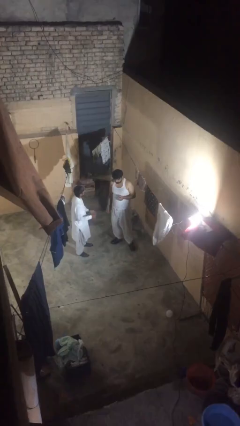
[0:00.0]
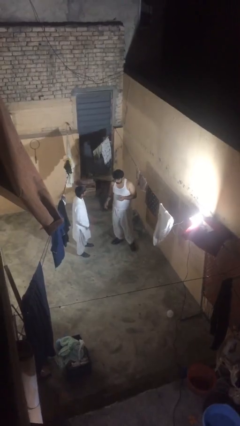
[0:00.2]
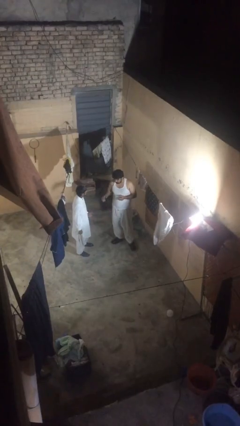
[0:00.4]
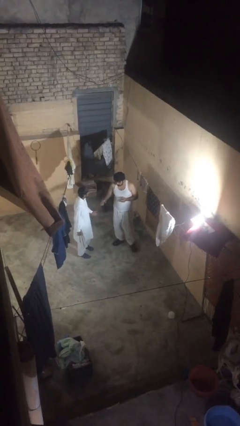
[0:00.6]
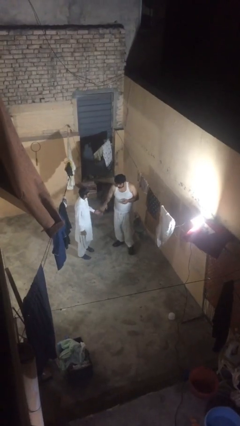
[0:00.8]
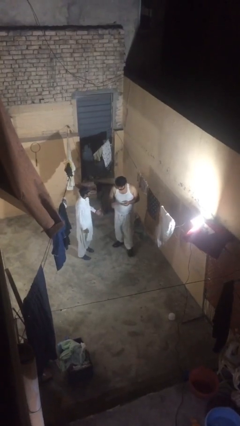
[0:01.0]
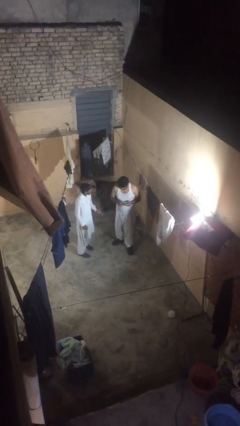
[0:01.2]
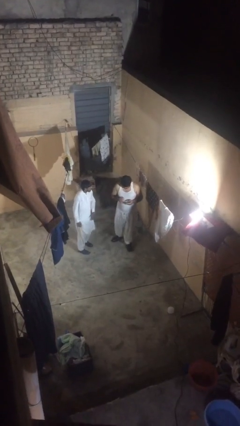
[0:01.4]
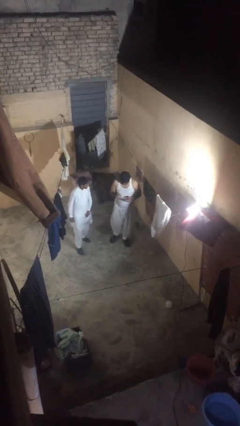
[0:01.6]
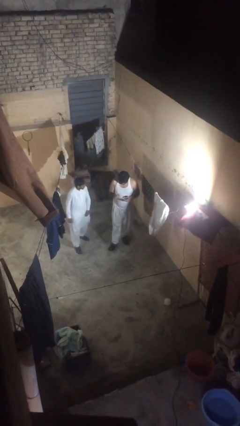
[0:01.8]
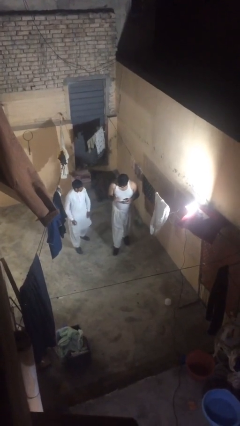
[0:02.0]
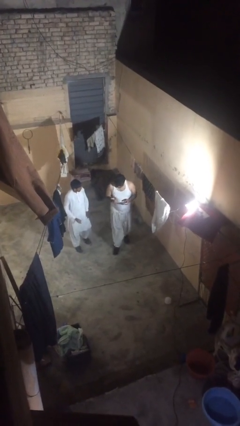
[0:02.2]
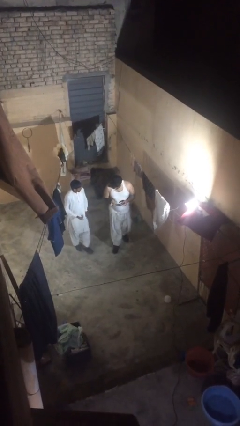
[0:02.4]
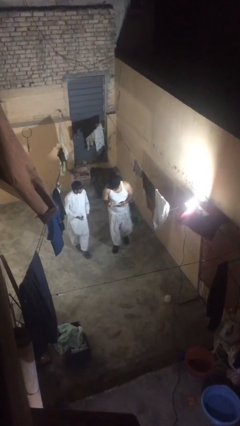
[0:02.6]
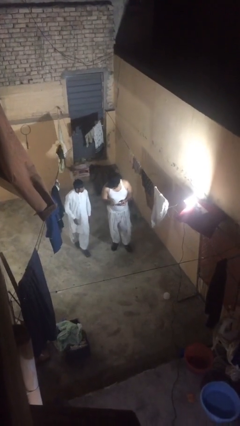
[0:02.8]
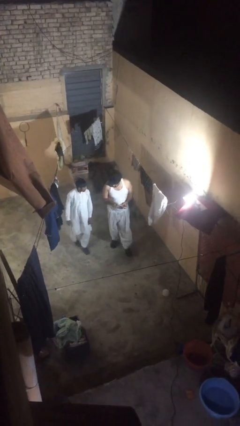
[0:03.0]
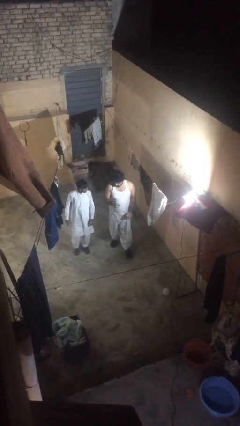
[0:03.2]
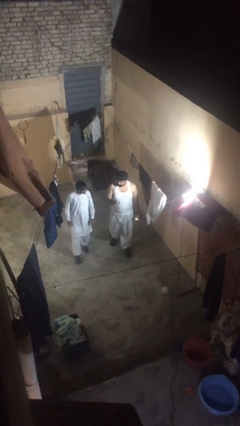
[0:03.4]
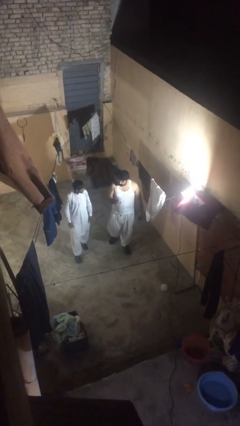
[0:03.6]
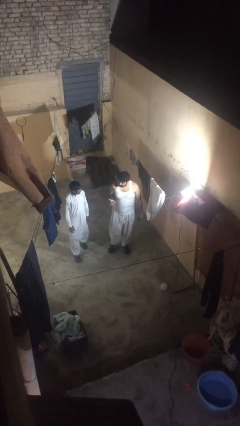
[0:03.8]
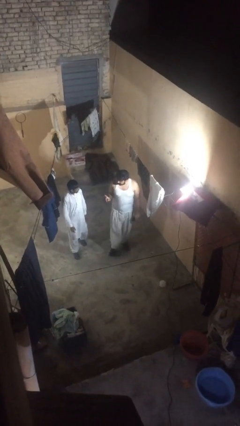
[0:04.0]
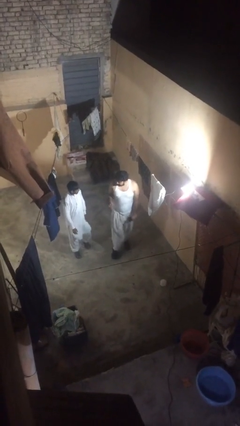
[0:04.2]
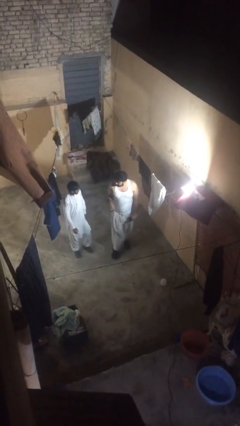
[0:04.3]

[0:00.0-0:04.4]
person talks to person

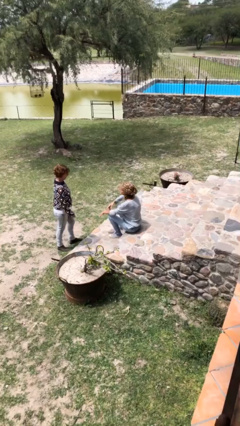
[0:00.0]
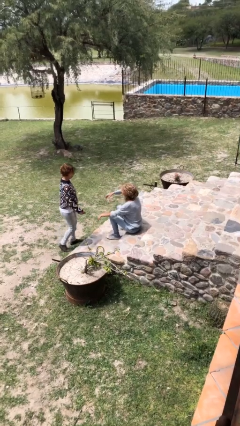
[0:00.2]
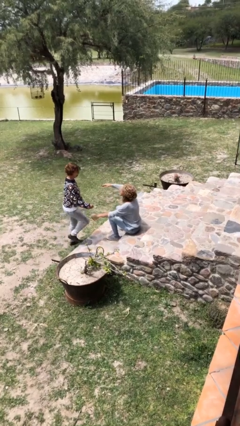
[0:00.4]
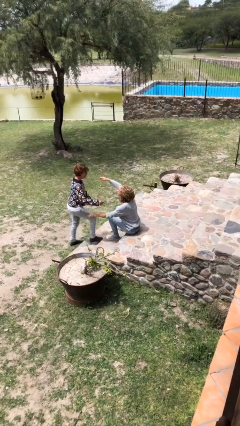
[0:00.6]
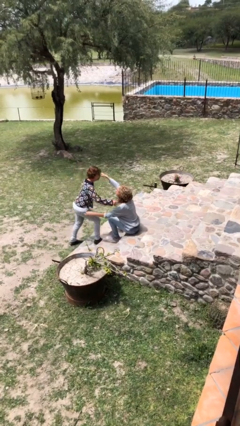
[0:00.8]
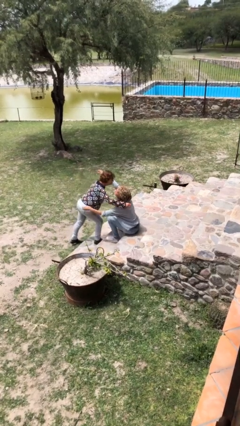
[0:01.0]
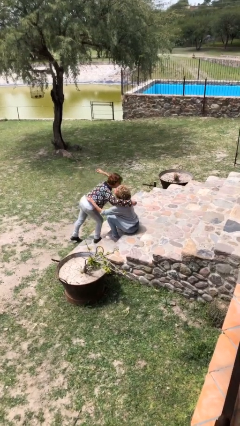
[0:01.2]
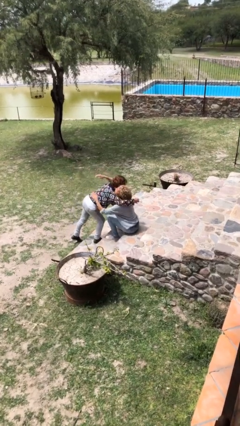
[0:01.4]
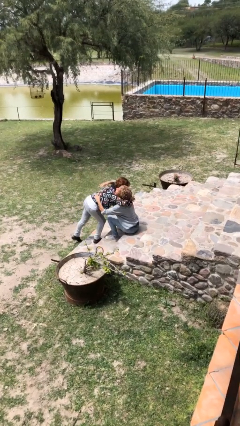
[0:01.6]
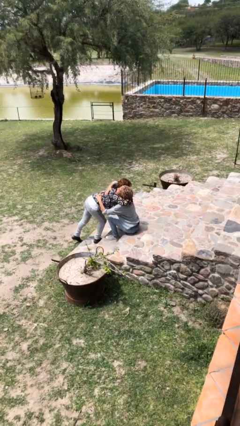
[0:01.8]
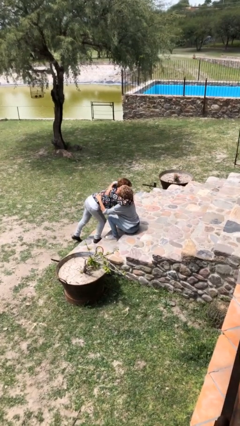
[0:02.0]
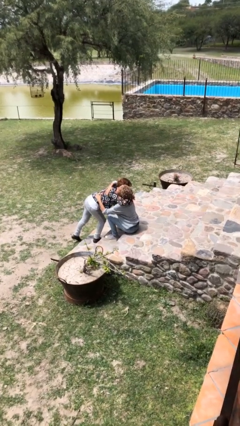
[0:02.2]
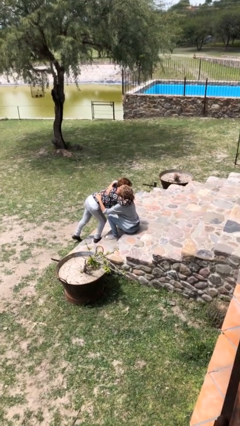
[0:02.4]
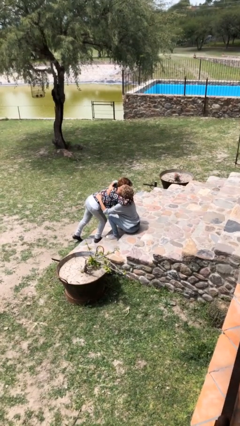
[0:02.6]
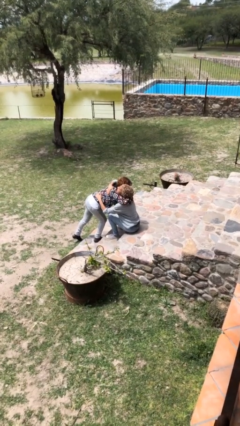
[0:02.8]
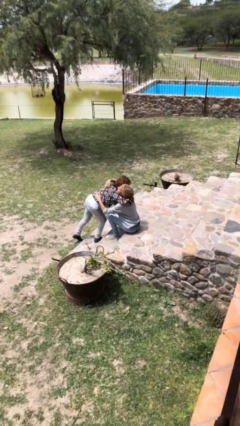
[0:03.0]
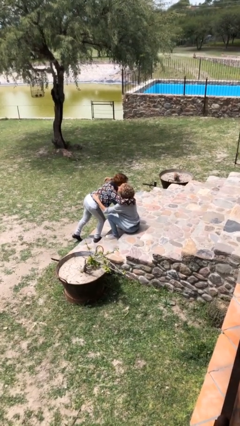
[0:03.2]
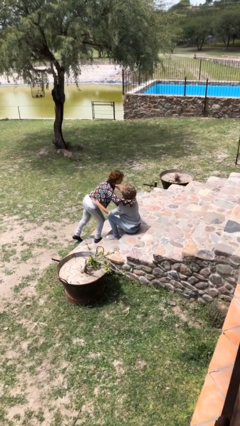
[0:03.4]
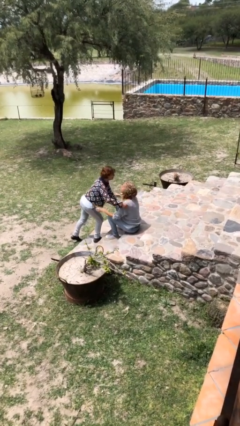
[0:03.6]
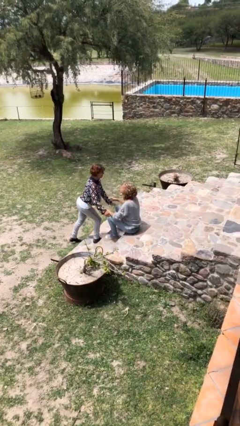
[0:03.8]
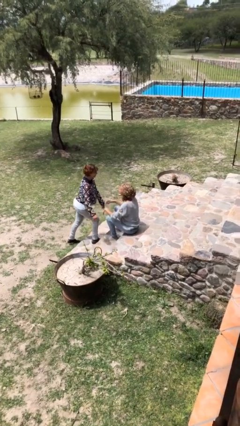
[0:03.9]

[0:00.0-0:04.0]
person embraces person

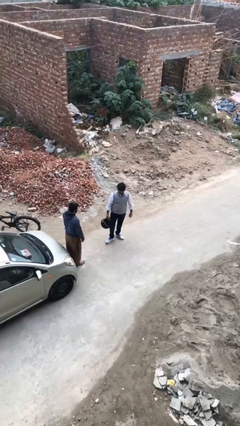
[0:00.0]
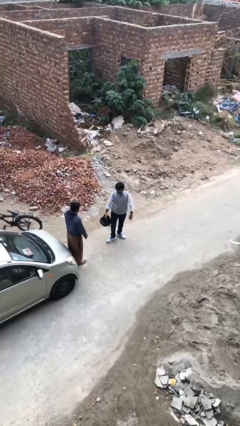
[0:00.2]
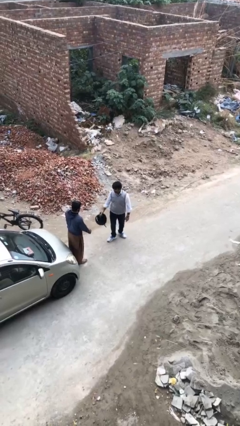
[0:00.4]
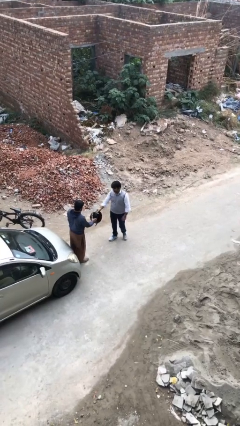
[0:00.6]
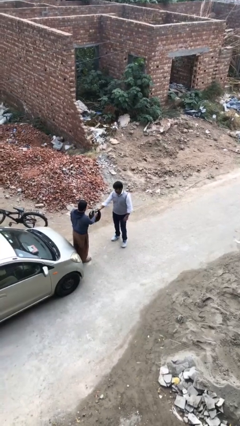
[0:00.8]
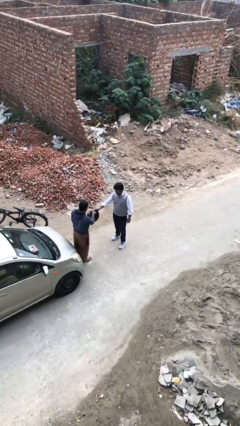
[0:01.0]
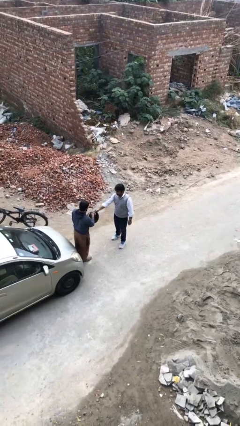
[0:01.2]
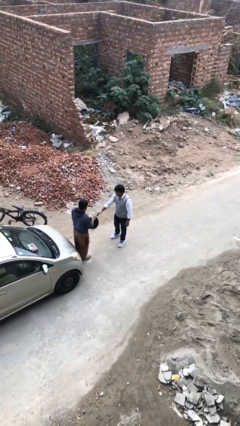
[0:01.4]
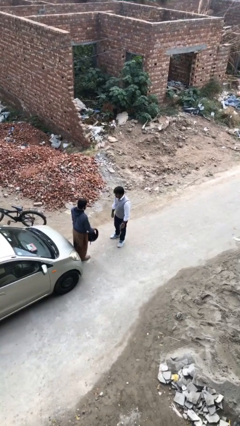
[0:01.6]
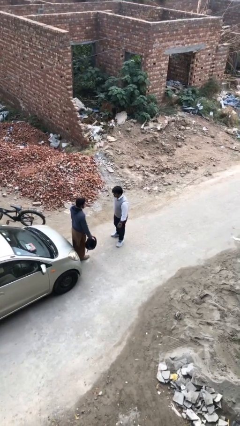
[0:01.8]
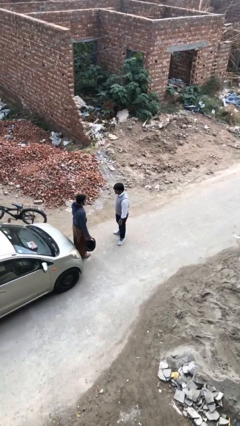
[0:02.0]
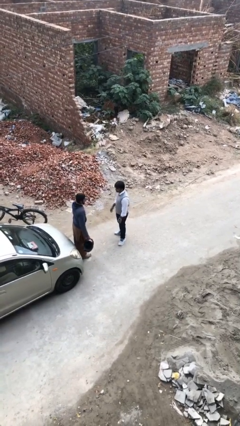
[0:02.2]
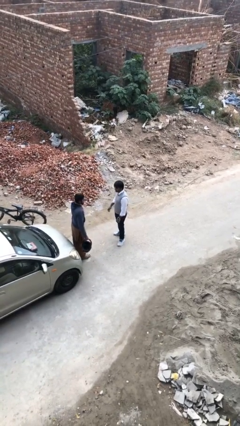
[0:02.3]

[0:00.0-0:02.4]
person transfers object to person

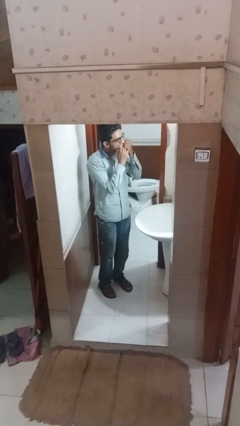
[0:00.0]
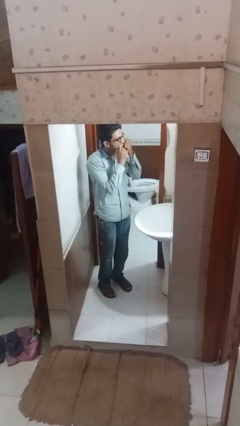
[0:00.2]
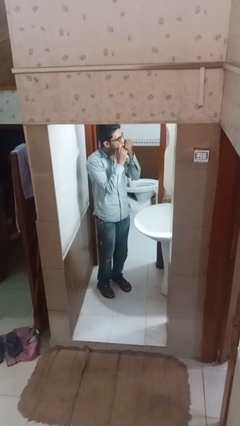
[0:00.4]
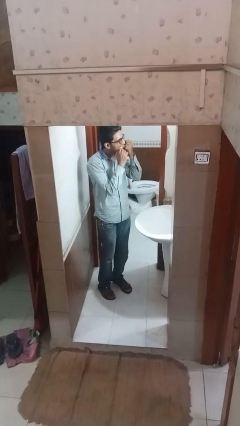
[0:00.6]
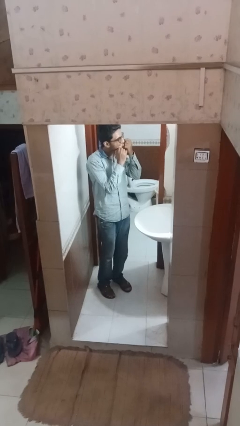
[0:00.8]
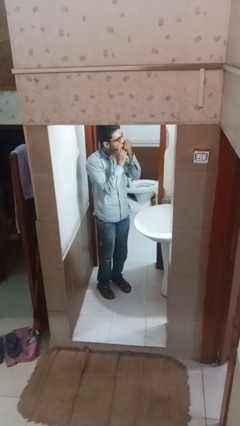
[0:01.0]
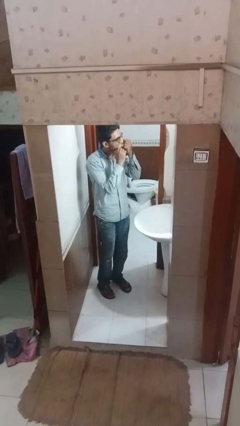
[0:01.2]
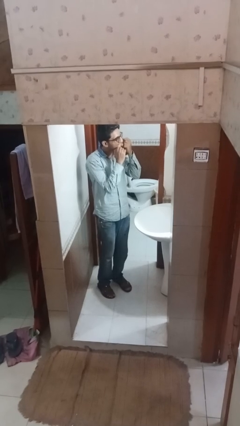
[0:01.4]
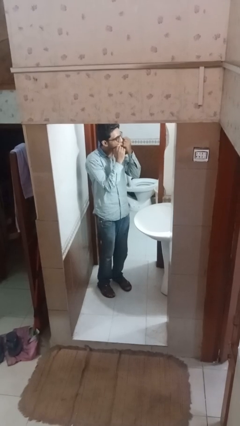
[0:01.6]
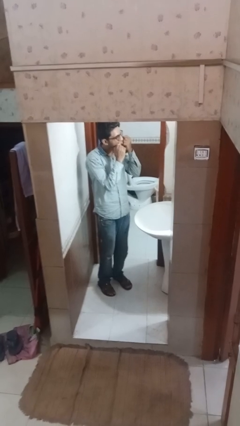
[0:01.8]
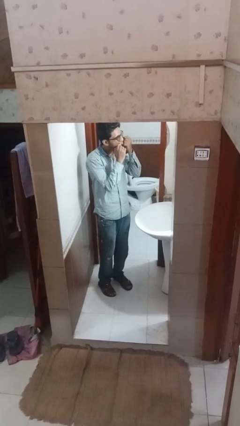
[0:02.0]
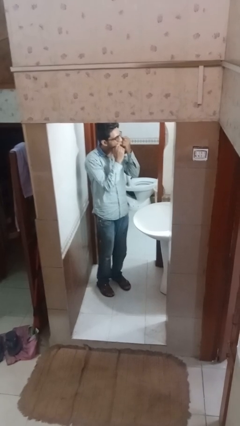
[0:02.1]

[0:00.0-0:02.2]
person flosses

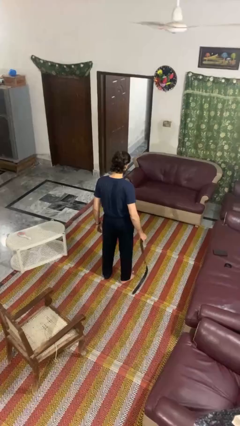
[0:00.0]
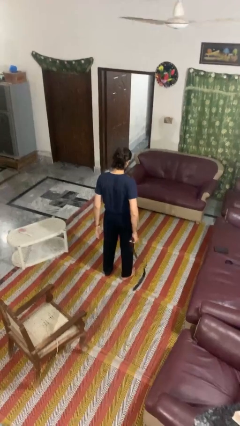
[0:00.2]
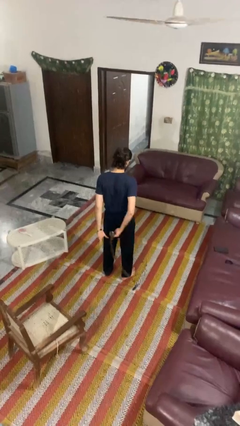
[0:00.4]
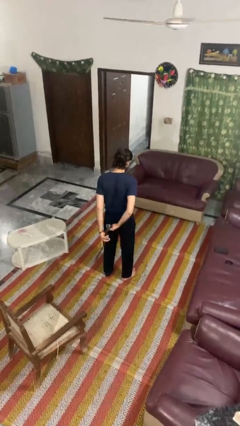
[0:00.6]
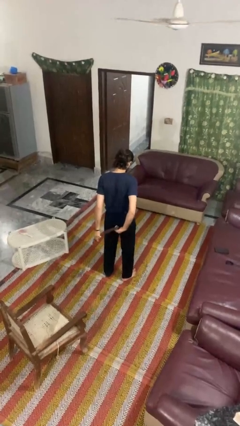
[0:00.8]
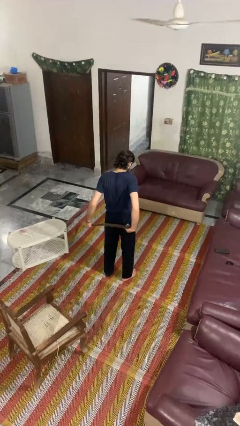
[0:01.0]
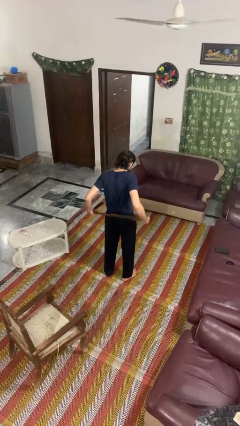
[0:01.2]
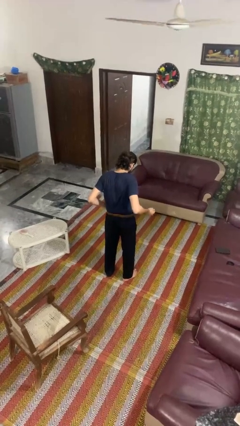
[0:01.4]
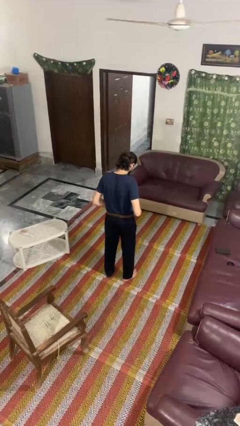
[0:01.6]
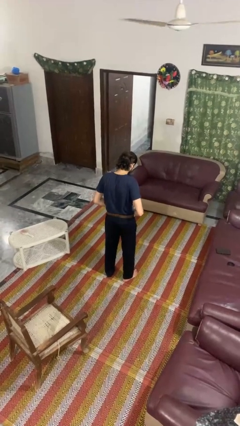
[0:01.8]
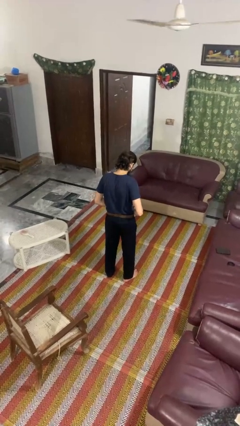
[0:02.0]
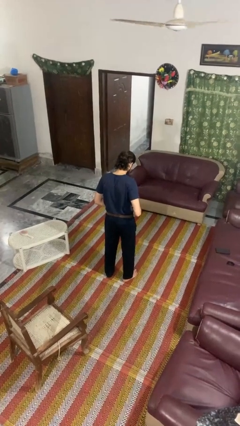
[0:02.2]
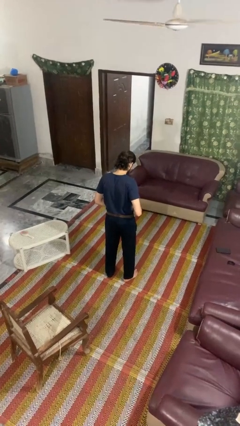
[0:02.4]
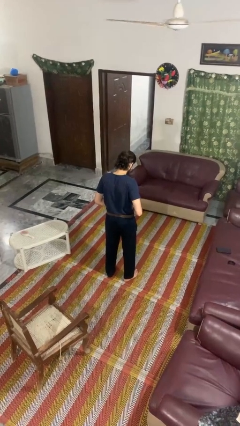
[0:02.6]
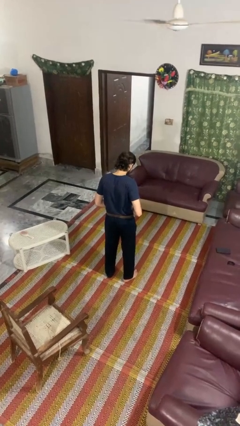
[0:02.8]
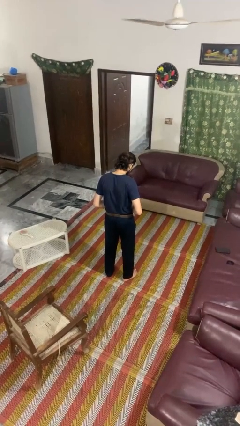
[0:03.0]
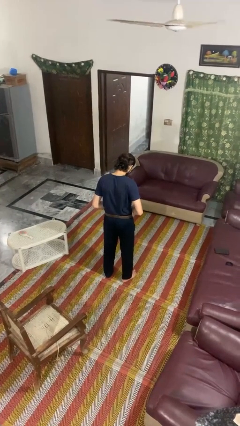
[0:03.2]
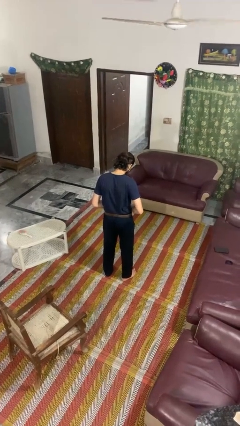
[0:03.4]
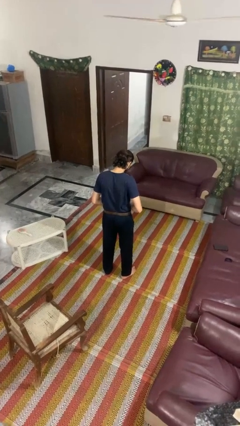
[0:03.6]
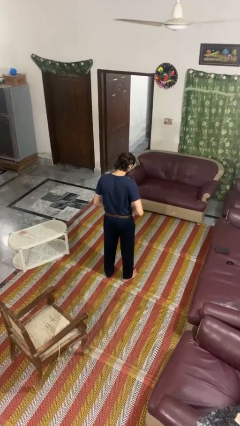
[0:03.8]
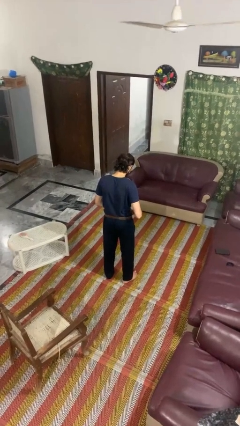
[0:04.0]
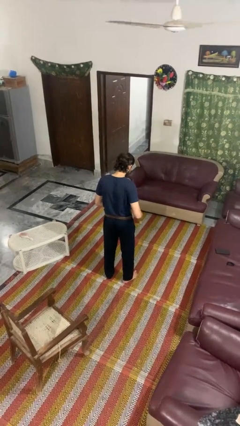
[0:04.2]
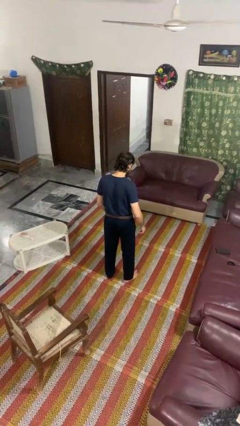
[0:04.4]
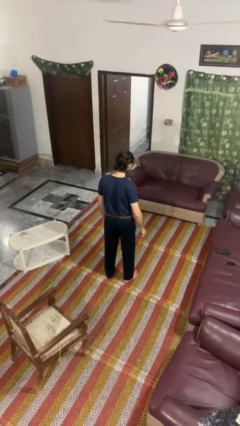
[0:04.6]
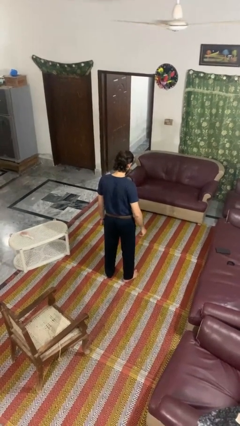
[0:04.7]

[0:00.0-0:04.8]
person puts on belt
